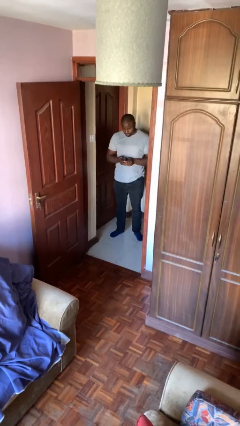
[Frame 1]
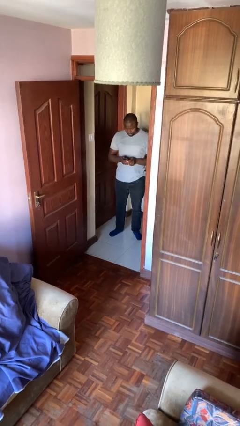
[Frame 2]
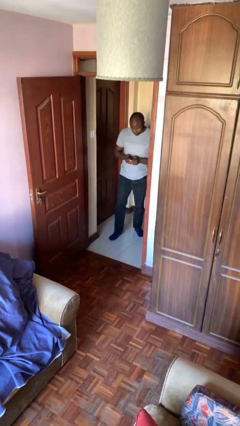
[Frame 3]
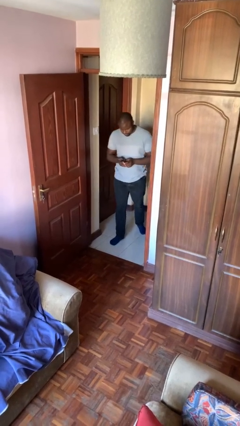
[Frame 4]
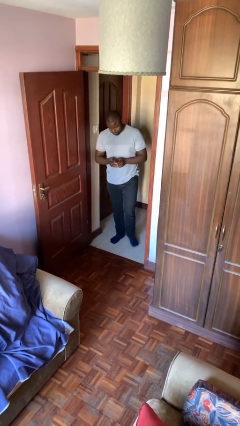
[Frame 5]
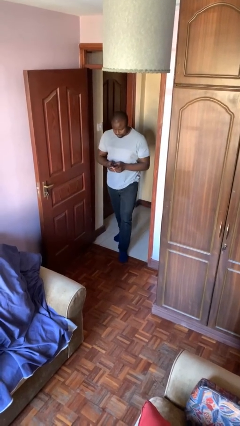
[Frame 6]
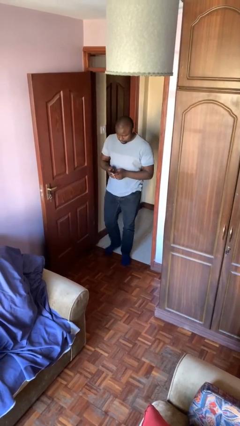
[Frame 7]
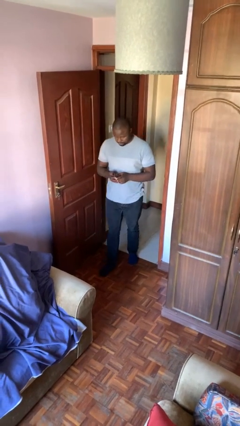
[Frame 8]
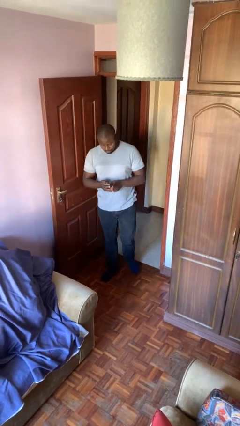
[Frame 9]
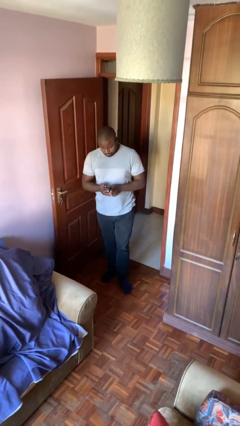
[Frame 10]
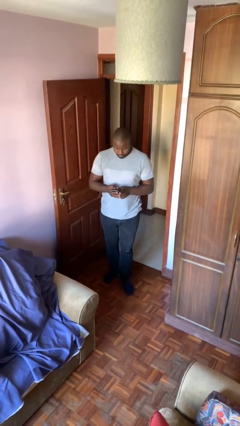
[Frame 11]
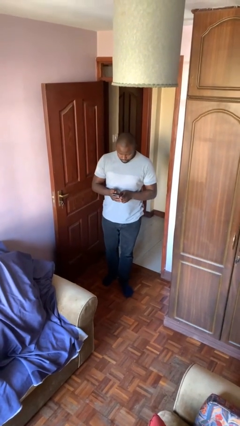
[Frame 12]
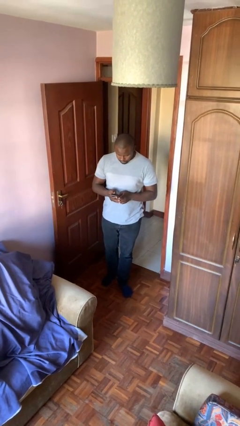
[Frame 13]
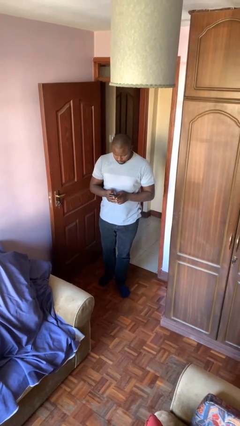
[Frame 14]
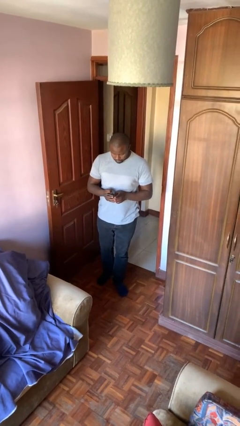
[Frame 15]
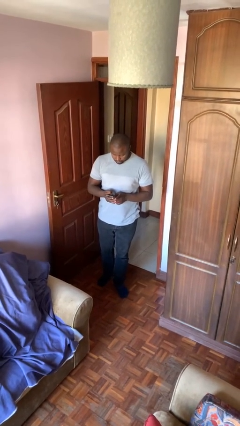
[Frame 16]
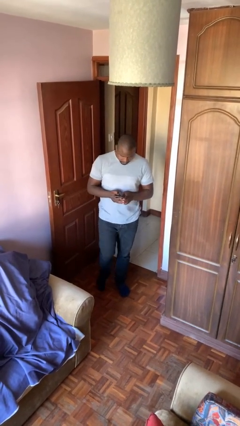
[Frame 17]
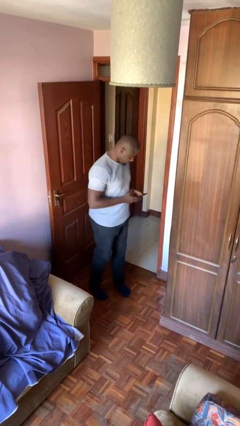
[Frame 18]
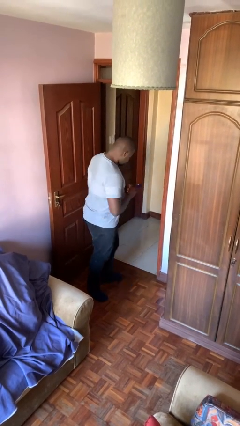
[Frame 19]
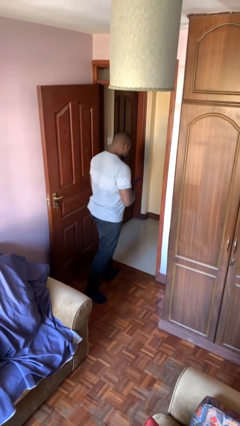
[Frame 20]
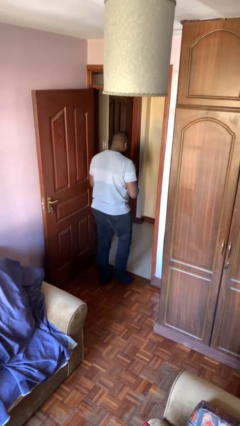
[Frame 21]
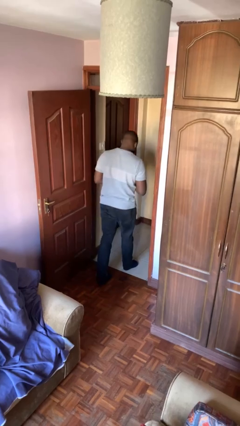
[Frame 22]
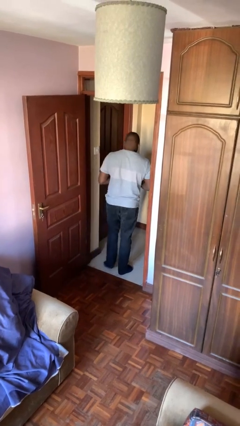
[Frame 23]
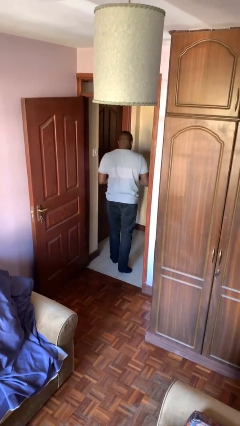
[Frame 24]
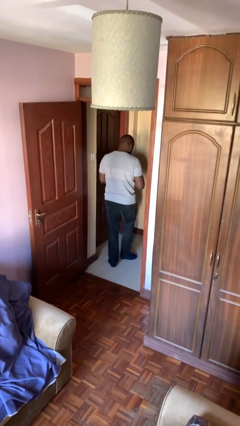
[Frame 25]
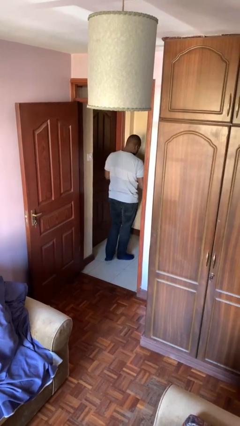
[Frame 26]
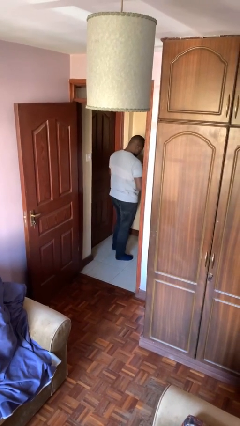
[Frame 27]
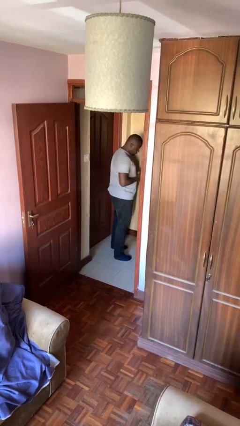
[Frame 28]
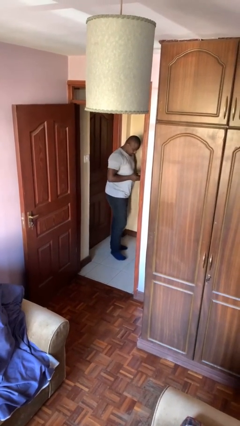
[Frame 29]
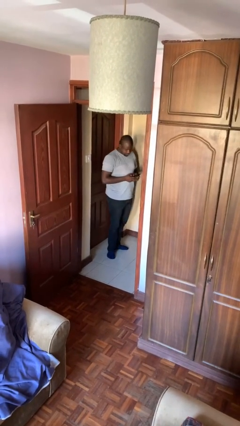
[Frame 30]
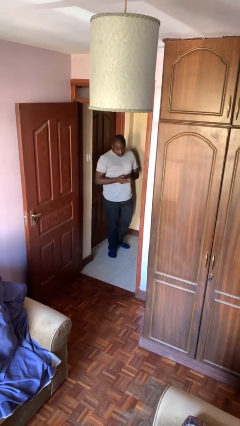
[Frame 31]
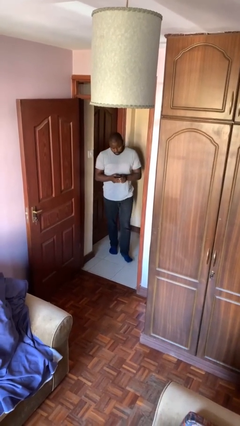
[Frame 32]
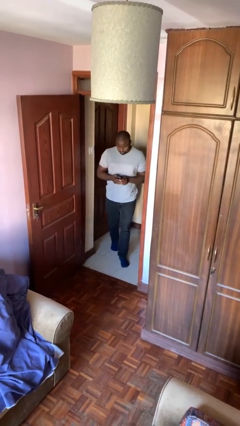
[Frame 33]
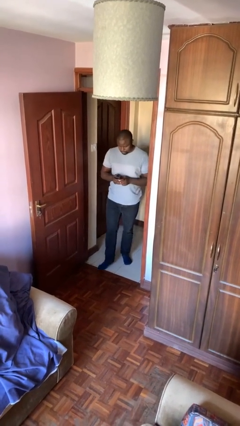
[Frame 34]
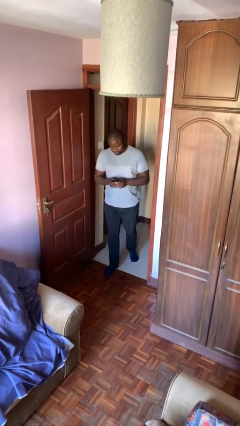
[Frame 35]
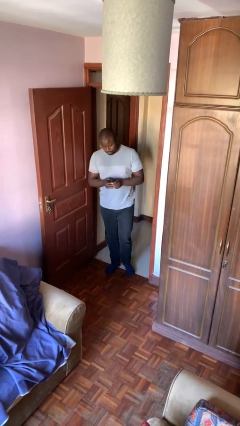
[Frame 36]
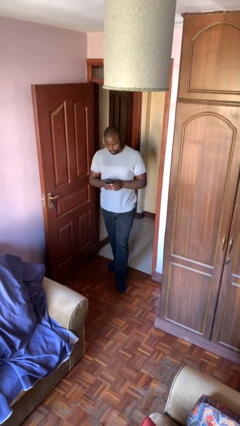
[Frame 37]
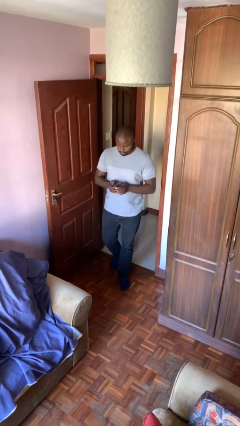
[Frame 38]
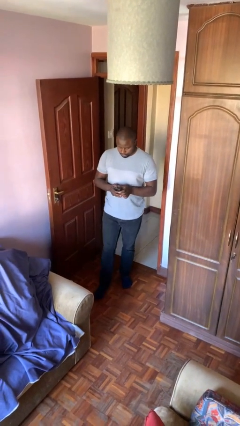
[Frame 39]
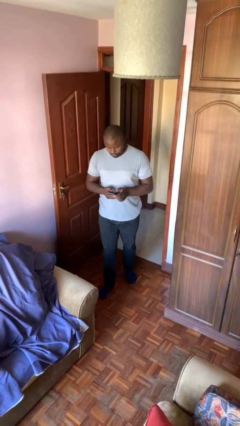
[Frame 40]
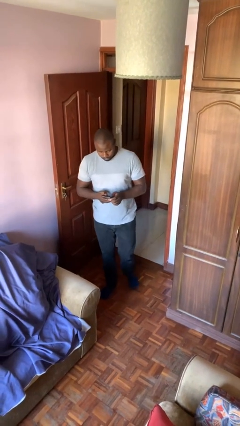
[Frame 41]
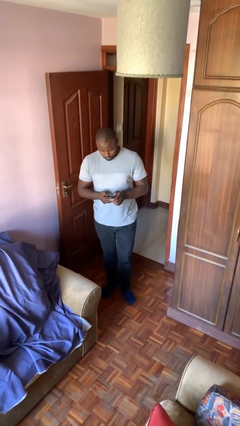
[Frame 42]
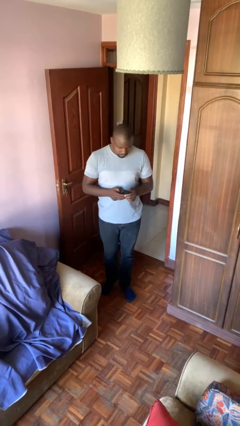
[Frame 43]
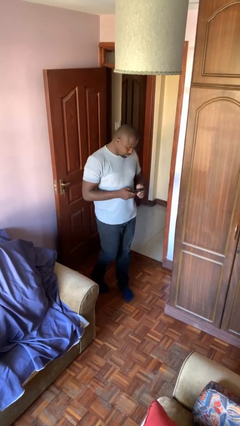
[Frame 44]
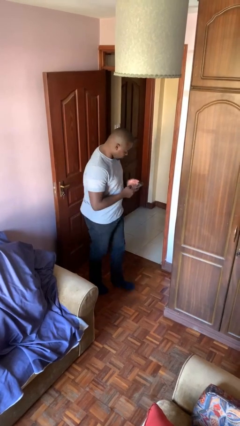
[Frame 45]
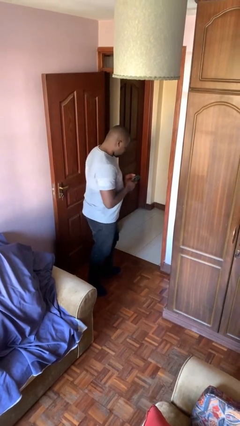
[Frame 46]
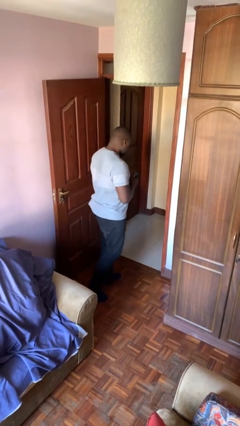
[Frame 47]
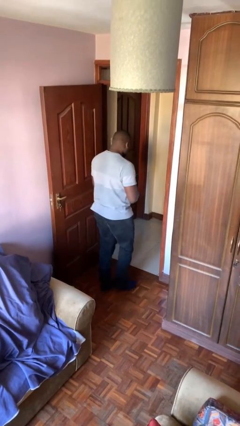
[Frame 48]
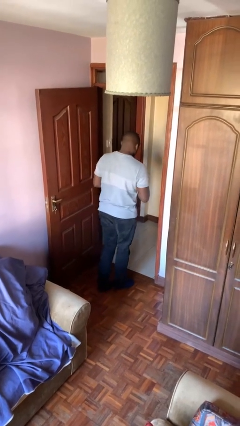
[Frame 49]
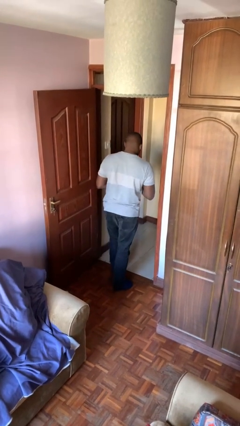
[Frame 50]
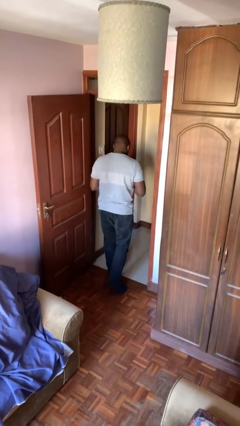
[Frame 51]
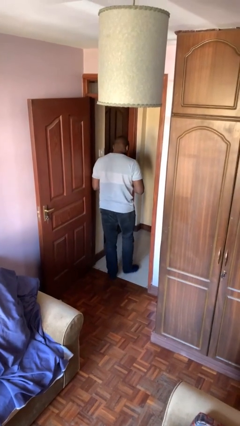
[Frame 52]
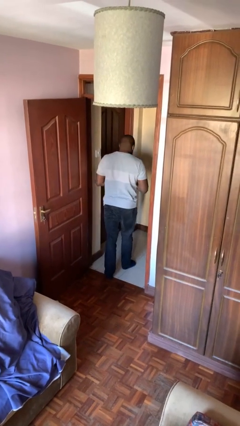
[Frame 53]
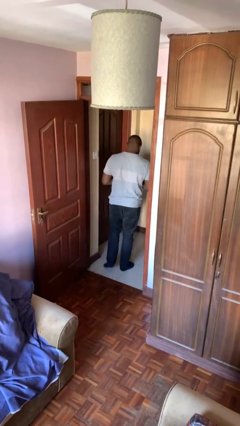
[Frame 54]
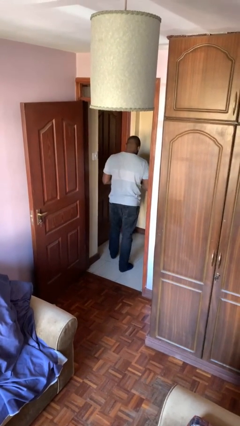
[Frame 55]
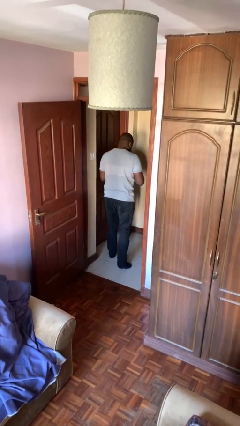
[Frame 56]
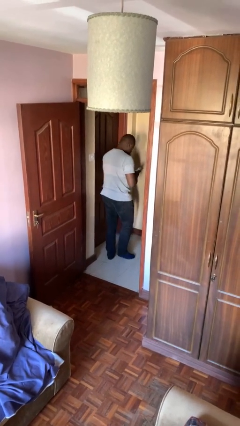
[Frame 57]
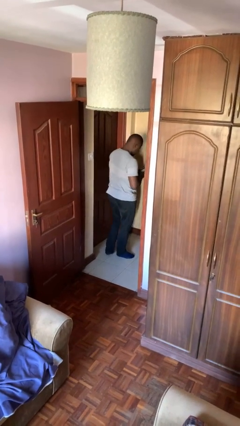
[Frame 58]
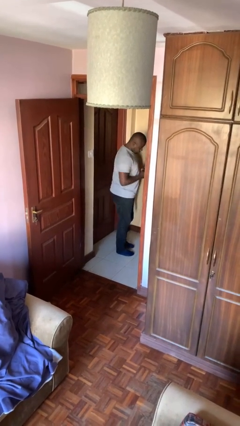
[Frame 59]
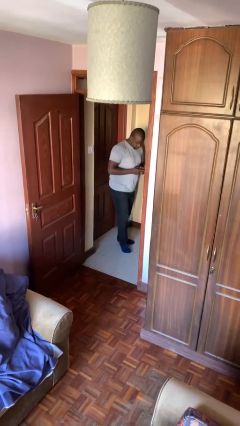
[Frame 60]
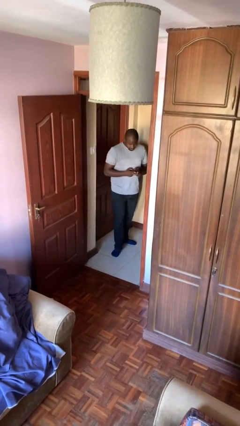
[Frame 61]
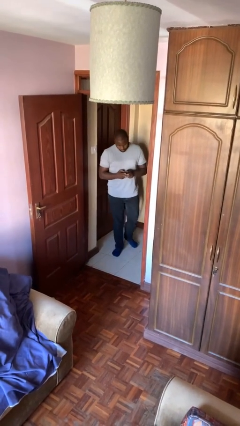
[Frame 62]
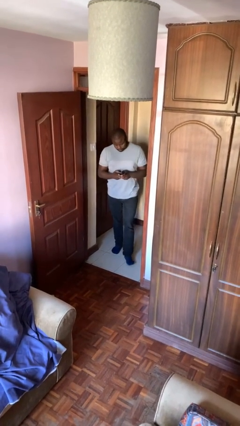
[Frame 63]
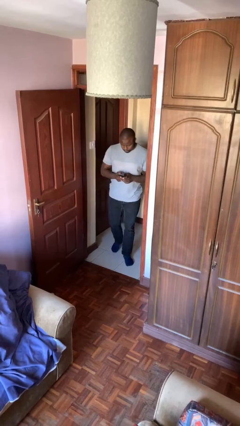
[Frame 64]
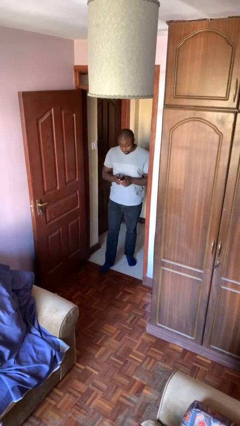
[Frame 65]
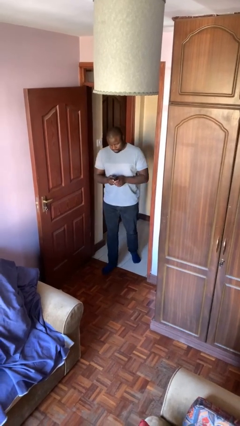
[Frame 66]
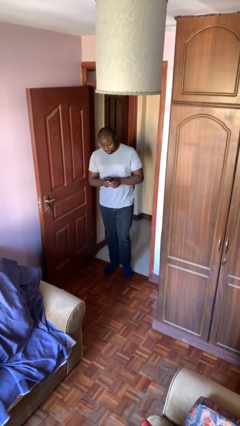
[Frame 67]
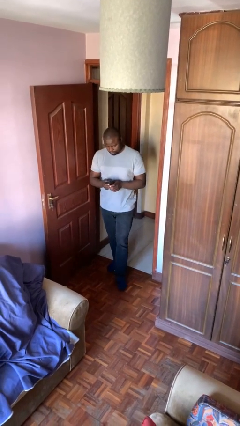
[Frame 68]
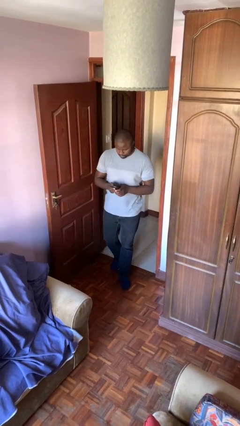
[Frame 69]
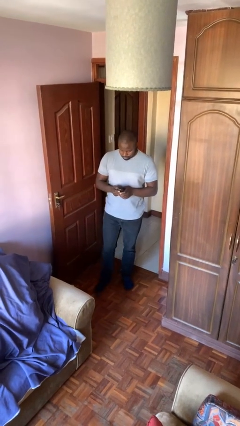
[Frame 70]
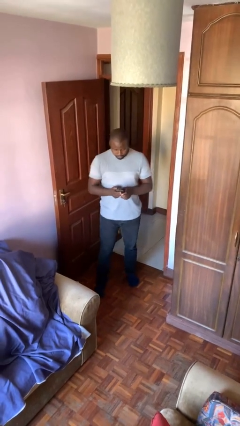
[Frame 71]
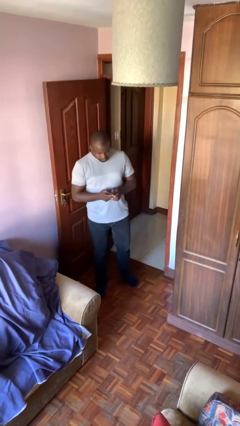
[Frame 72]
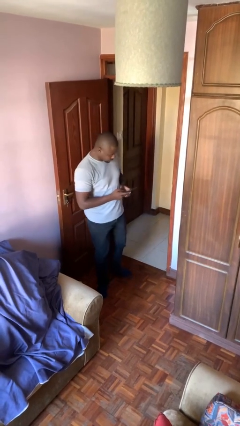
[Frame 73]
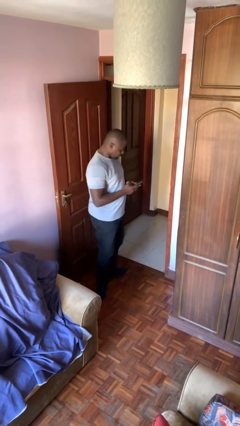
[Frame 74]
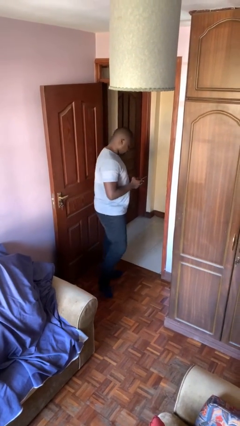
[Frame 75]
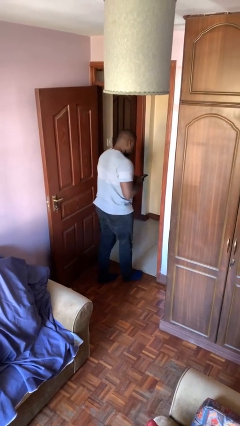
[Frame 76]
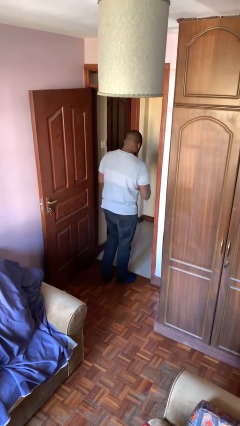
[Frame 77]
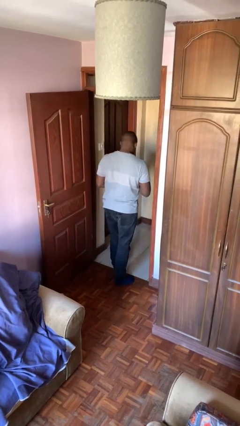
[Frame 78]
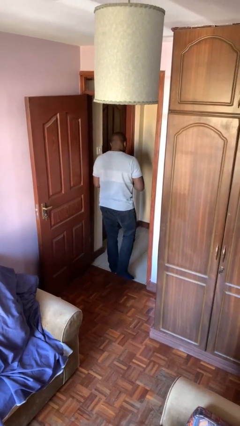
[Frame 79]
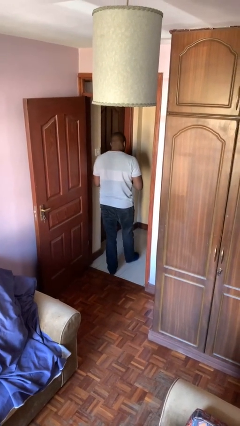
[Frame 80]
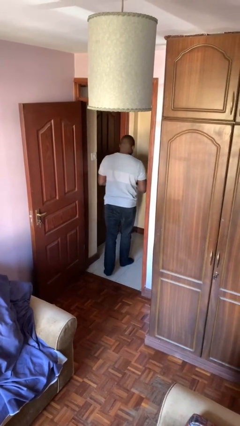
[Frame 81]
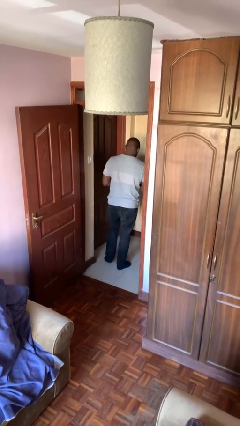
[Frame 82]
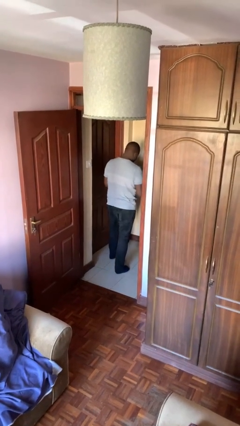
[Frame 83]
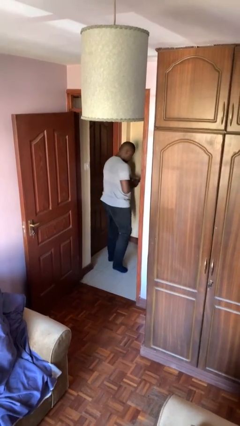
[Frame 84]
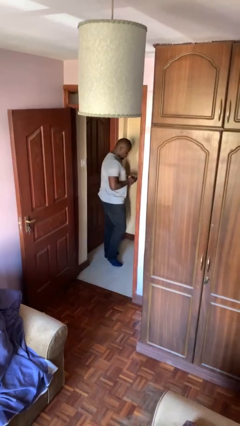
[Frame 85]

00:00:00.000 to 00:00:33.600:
person texts on phone

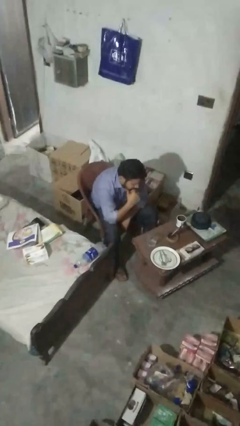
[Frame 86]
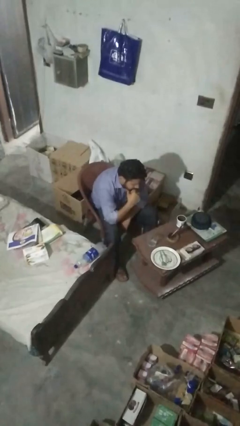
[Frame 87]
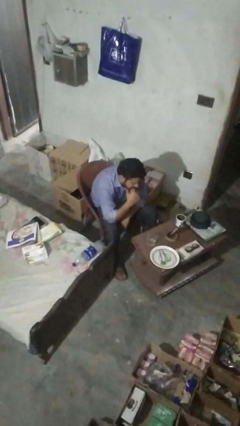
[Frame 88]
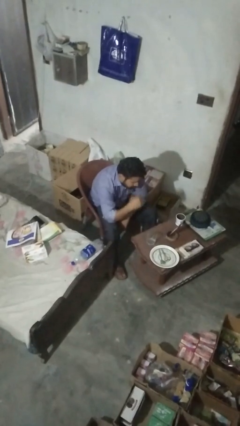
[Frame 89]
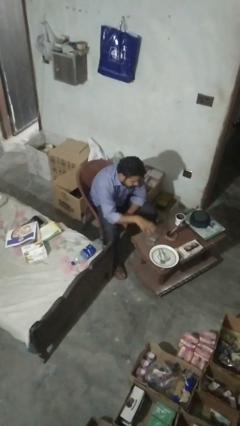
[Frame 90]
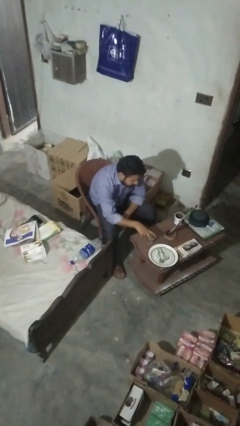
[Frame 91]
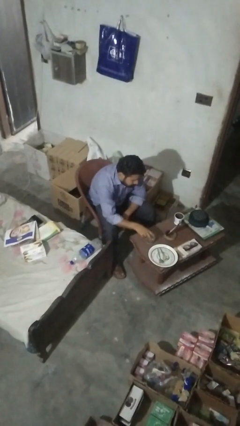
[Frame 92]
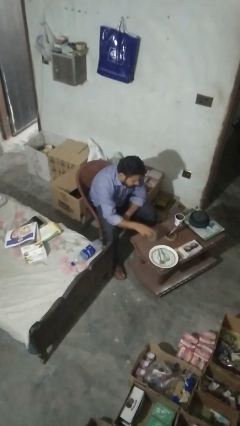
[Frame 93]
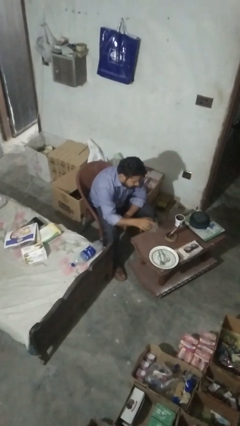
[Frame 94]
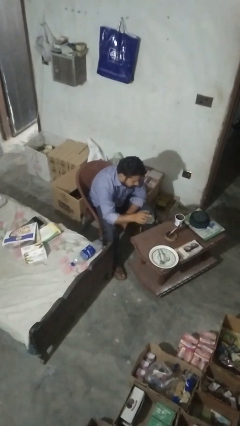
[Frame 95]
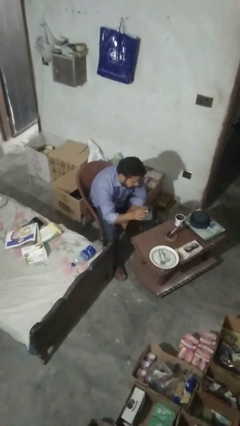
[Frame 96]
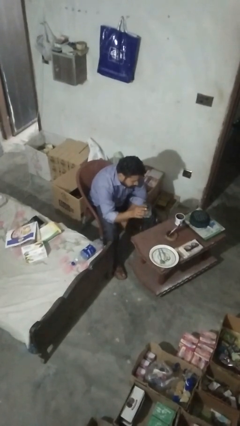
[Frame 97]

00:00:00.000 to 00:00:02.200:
person picks up object from table
